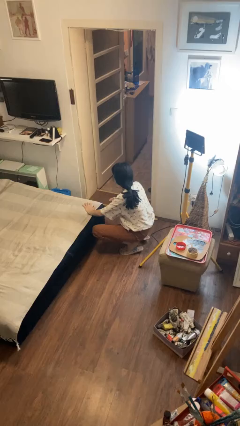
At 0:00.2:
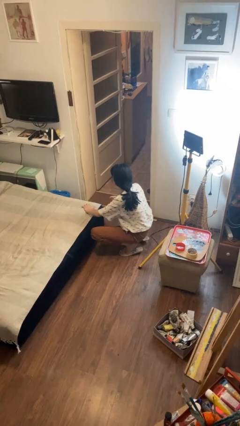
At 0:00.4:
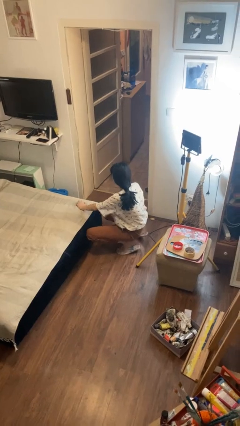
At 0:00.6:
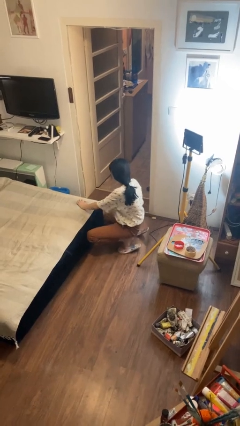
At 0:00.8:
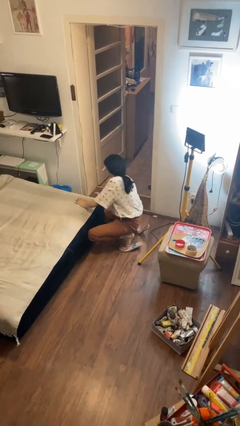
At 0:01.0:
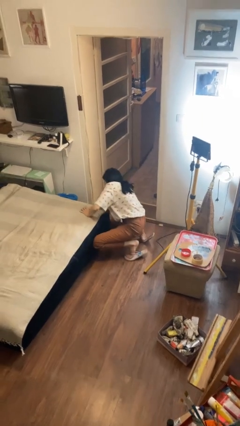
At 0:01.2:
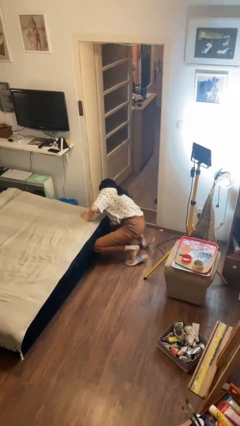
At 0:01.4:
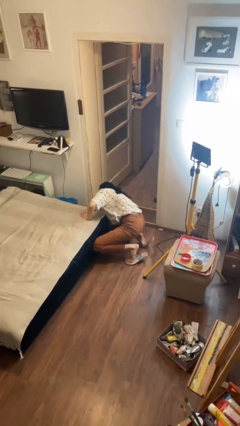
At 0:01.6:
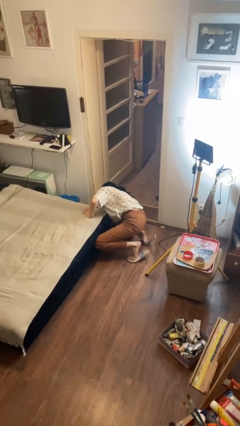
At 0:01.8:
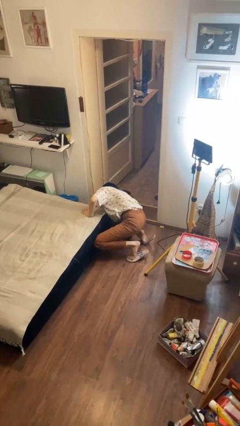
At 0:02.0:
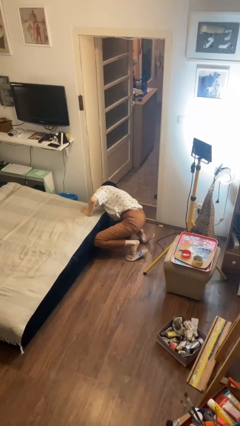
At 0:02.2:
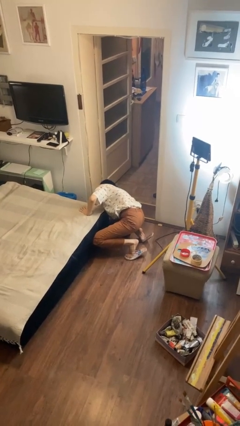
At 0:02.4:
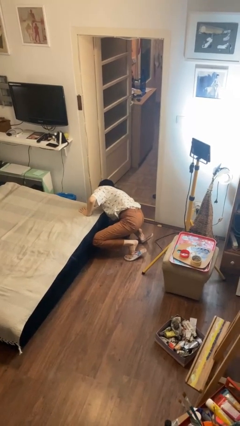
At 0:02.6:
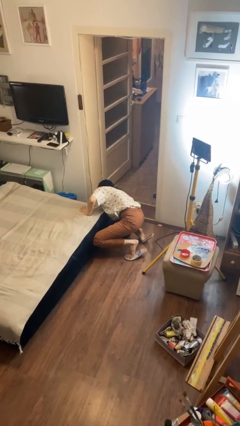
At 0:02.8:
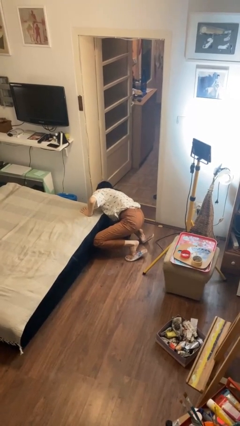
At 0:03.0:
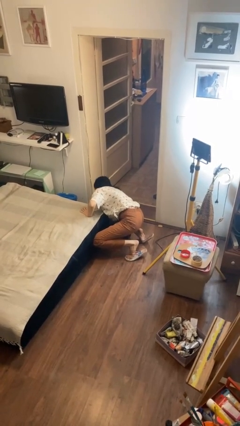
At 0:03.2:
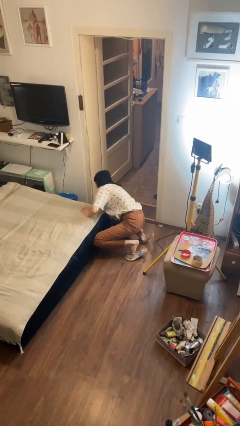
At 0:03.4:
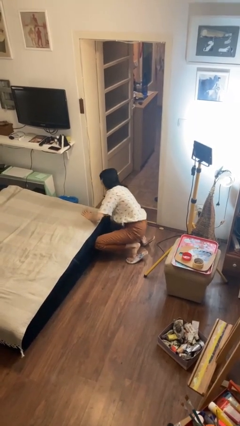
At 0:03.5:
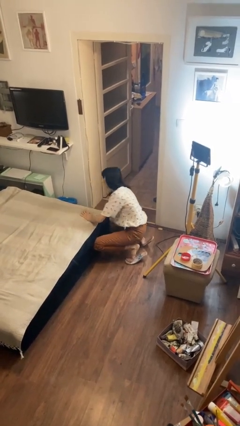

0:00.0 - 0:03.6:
person searches under bed

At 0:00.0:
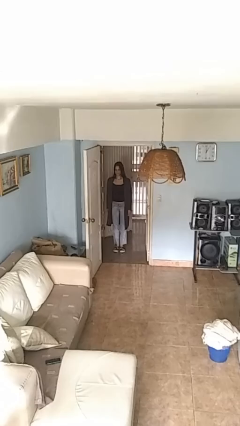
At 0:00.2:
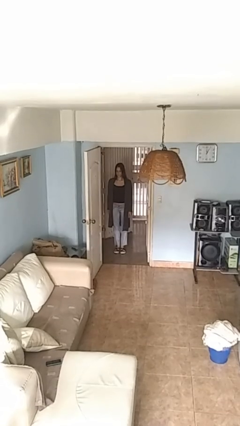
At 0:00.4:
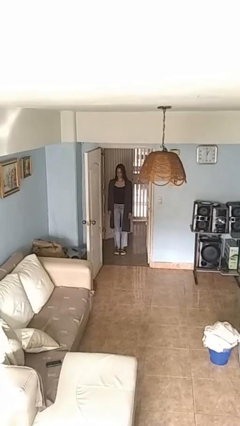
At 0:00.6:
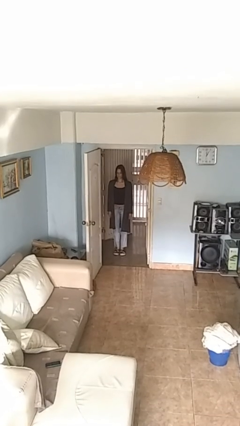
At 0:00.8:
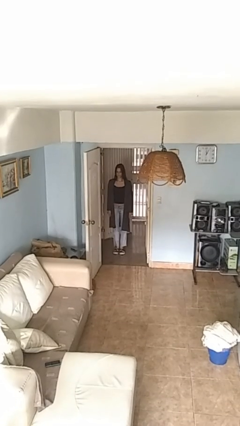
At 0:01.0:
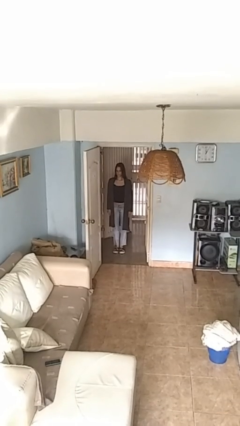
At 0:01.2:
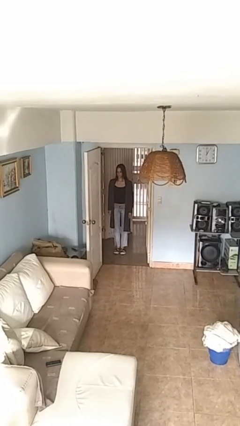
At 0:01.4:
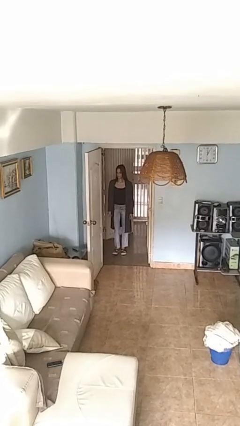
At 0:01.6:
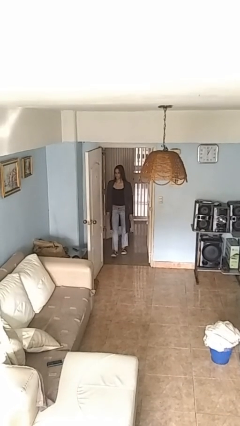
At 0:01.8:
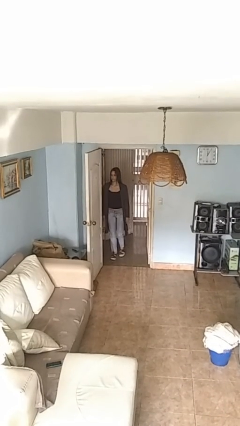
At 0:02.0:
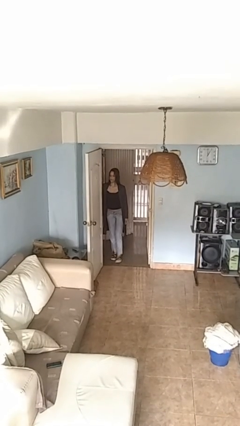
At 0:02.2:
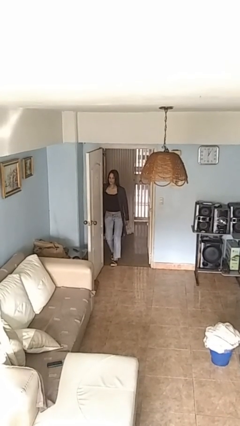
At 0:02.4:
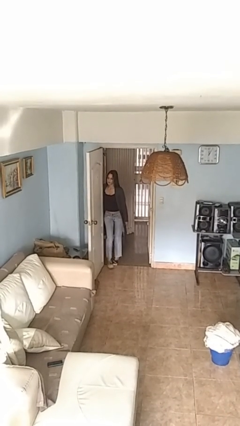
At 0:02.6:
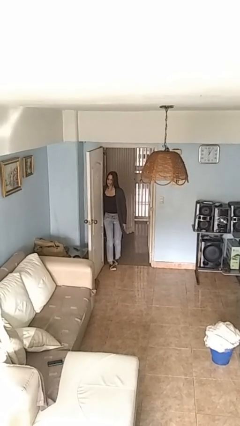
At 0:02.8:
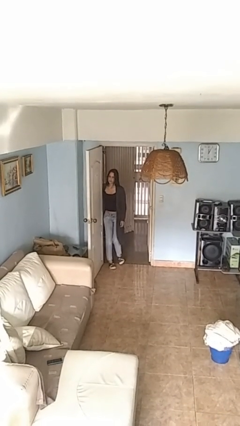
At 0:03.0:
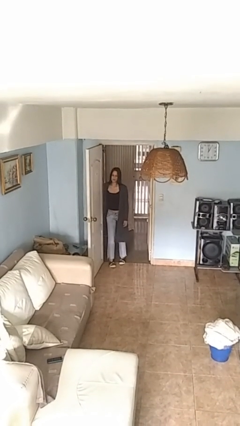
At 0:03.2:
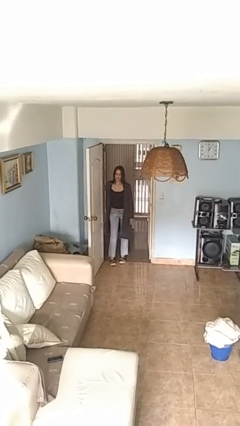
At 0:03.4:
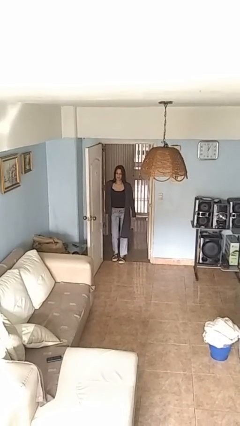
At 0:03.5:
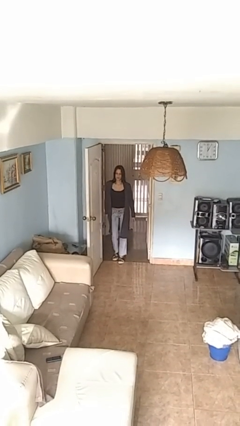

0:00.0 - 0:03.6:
person bumps into wall

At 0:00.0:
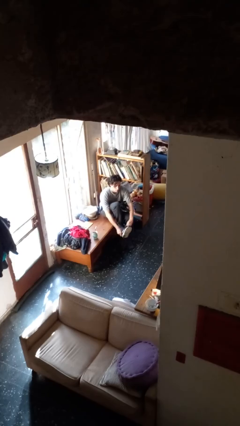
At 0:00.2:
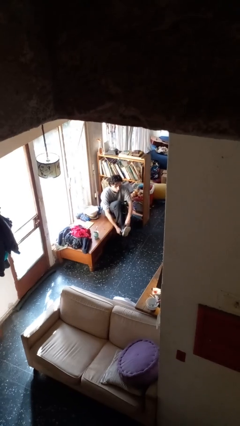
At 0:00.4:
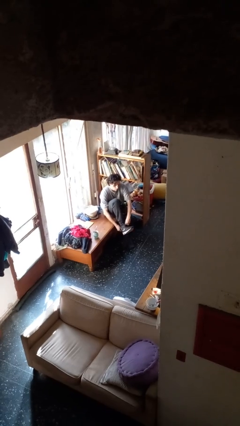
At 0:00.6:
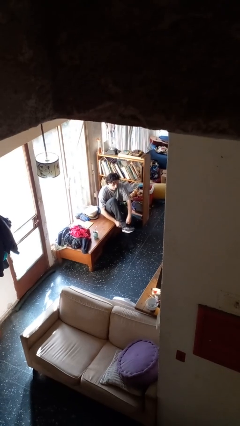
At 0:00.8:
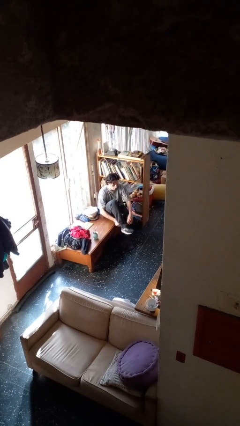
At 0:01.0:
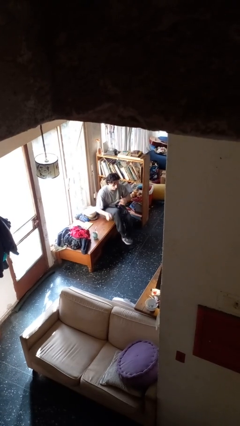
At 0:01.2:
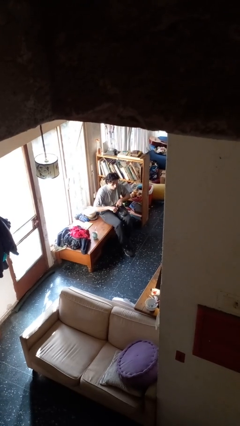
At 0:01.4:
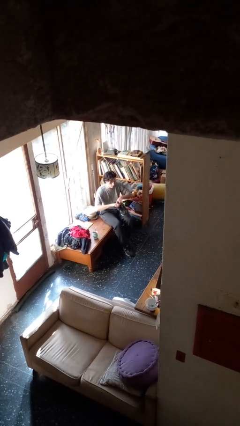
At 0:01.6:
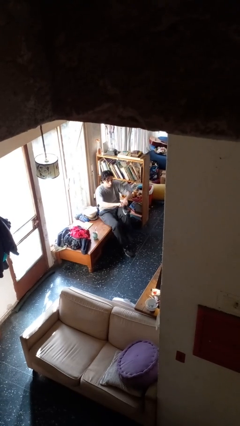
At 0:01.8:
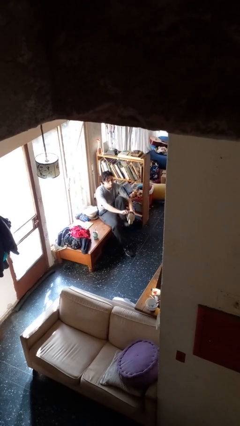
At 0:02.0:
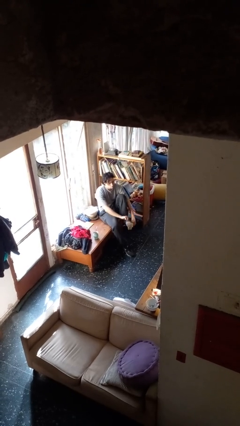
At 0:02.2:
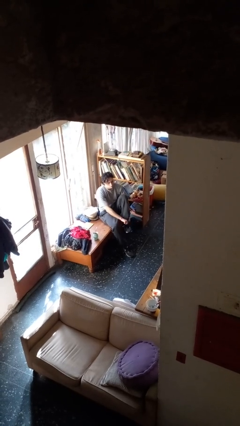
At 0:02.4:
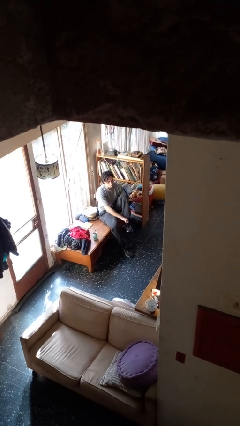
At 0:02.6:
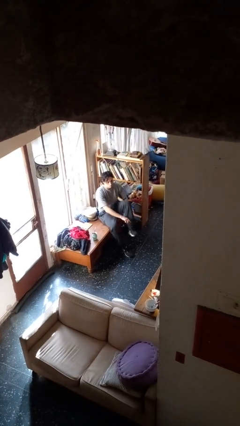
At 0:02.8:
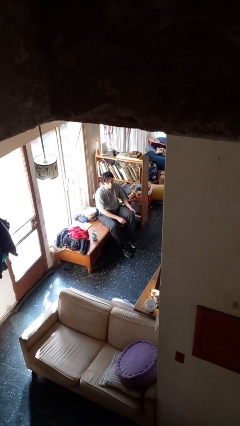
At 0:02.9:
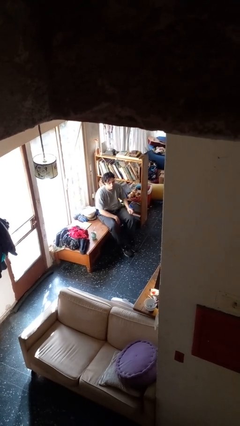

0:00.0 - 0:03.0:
person puts on shoes

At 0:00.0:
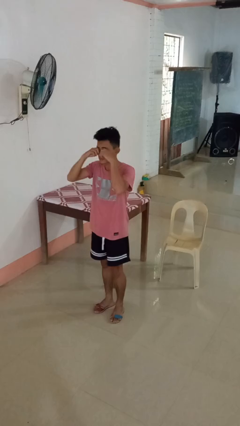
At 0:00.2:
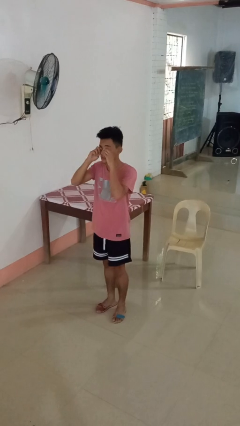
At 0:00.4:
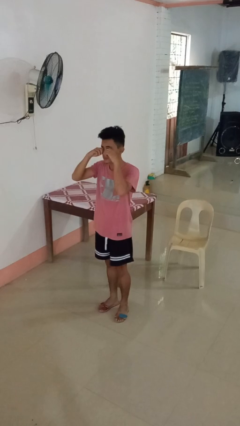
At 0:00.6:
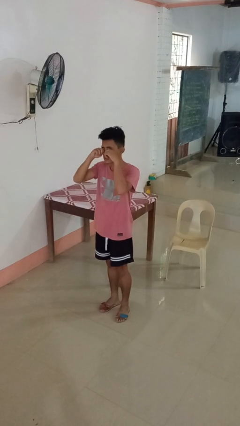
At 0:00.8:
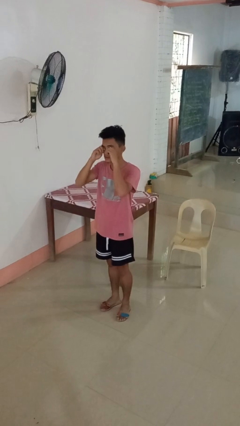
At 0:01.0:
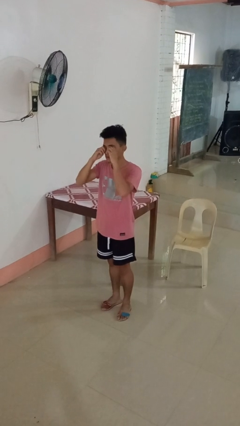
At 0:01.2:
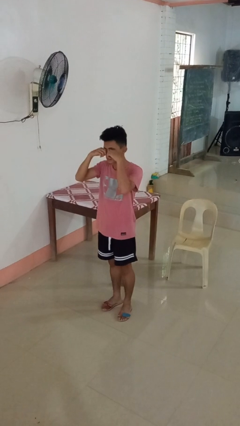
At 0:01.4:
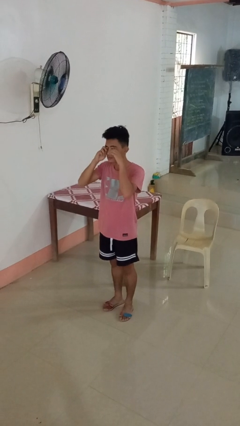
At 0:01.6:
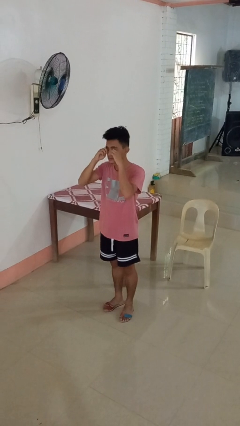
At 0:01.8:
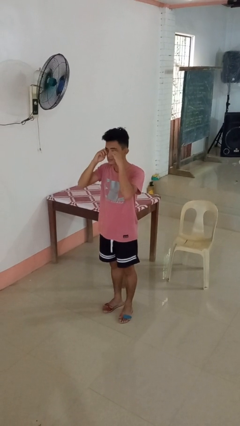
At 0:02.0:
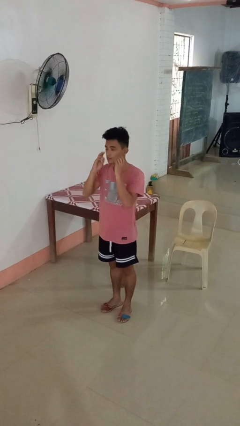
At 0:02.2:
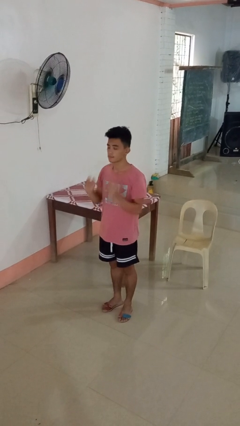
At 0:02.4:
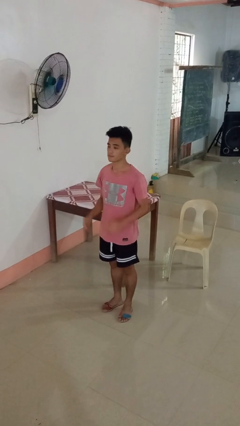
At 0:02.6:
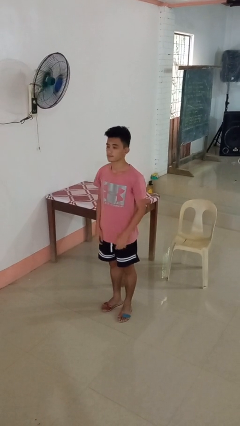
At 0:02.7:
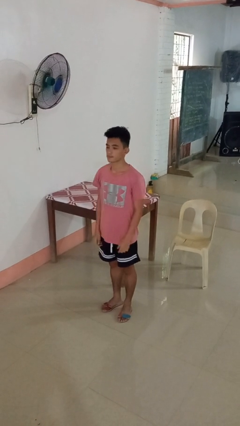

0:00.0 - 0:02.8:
person rubs eyes

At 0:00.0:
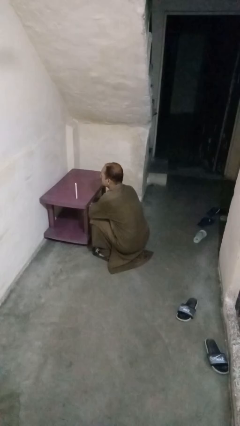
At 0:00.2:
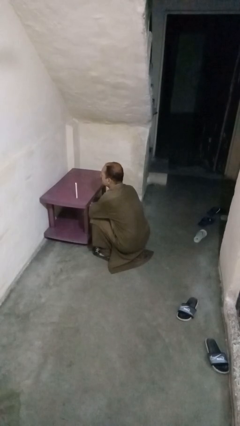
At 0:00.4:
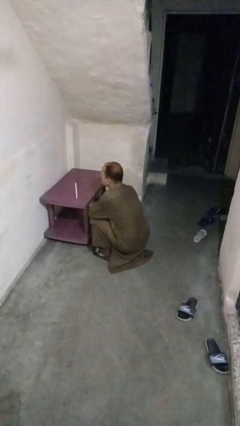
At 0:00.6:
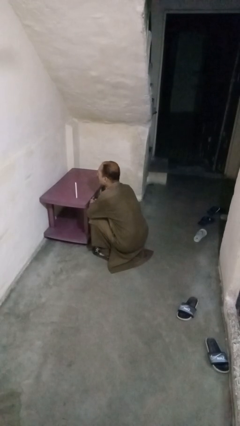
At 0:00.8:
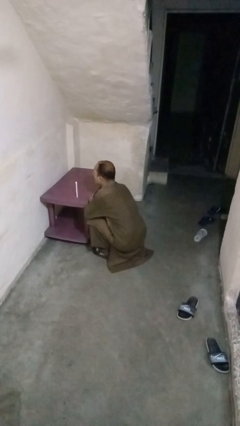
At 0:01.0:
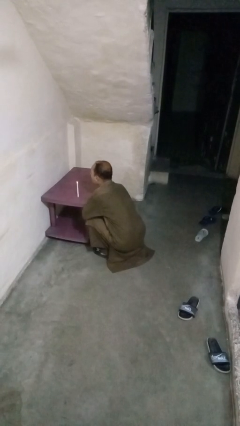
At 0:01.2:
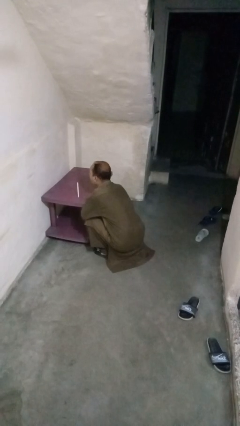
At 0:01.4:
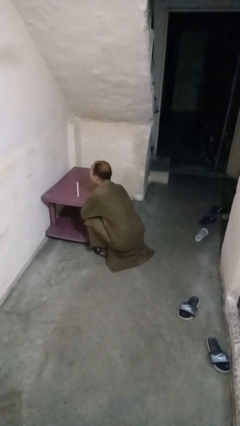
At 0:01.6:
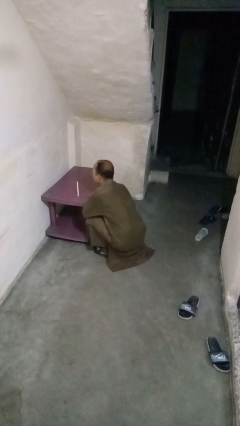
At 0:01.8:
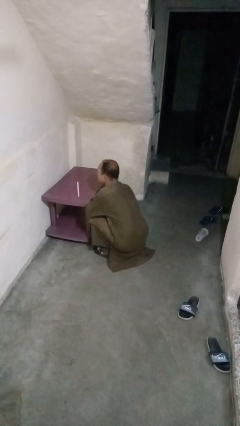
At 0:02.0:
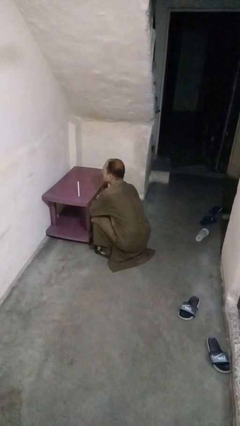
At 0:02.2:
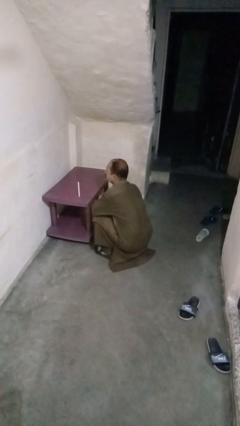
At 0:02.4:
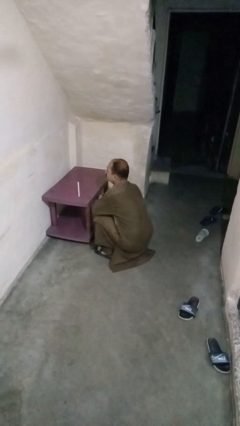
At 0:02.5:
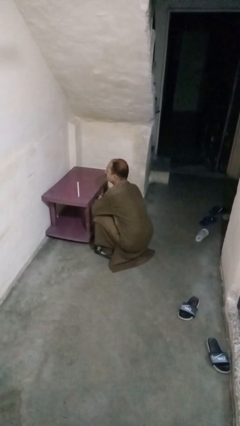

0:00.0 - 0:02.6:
person extinguishes candle

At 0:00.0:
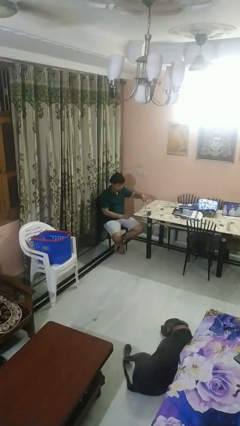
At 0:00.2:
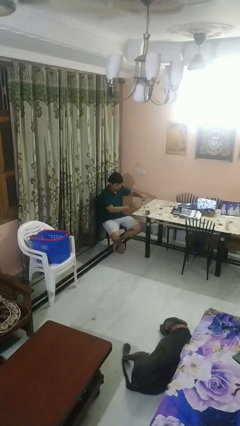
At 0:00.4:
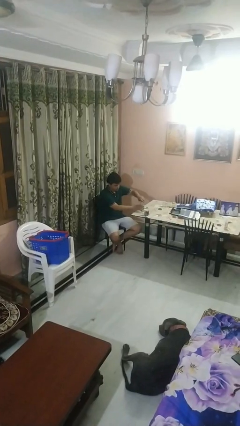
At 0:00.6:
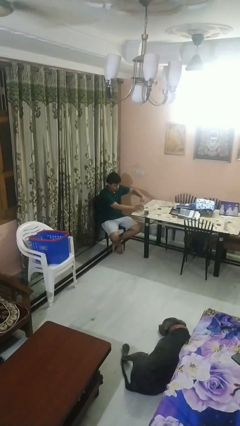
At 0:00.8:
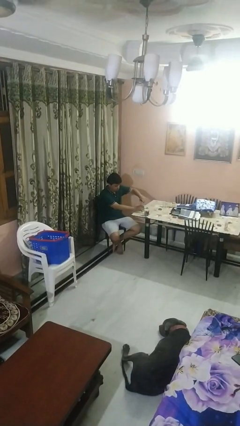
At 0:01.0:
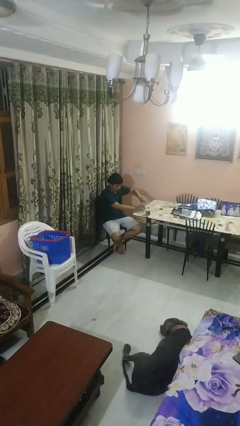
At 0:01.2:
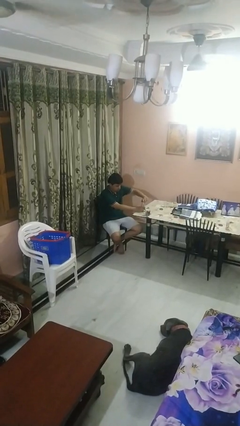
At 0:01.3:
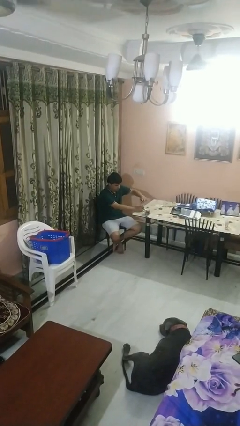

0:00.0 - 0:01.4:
person screws lid to bottle
